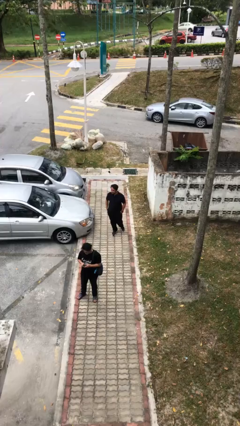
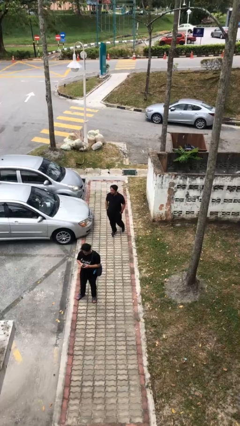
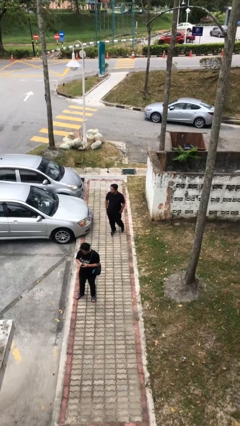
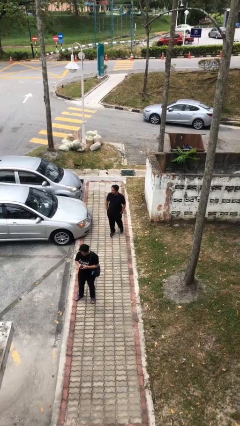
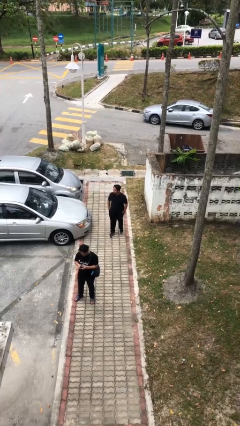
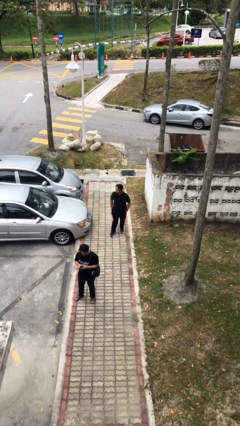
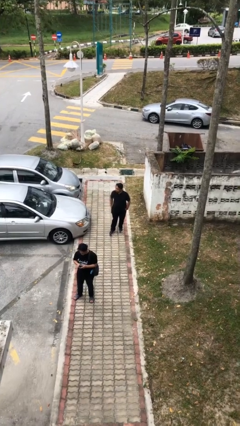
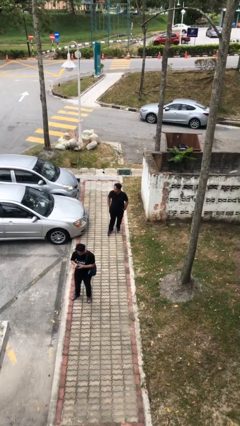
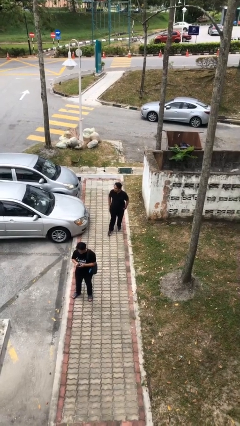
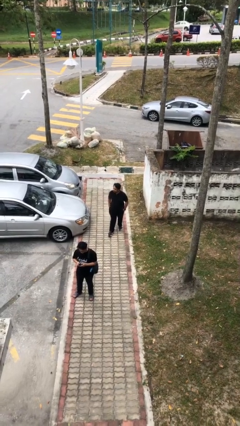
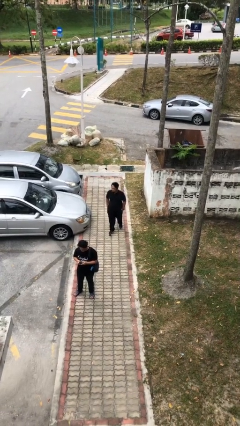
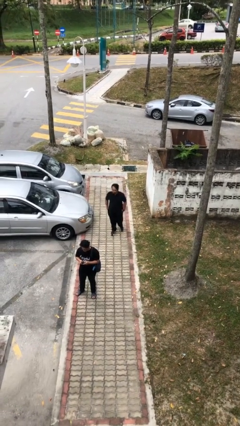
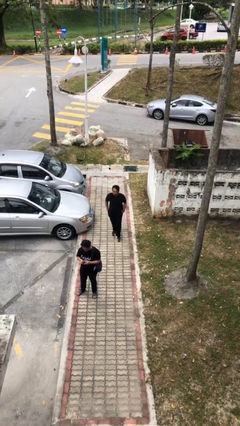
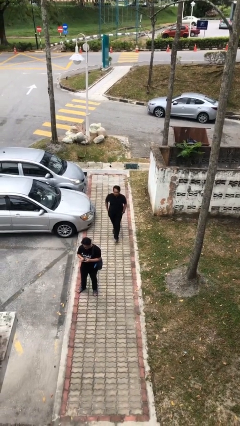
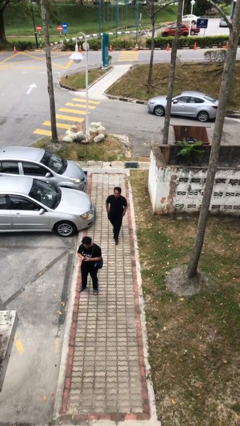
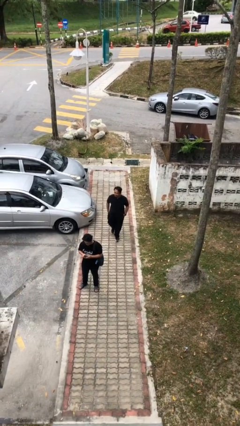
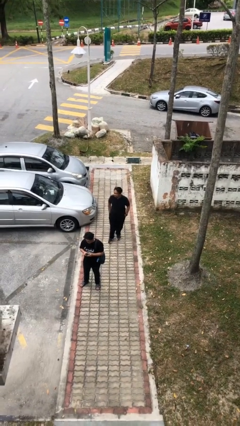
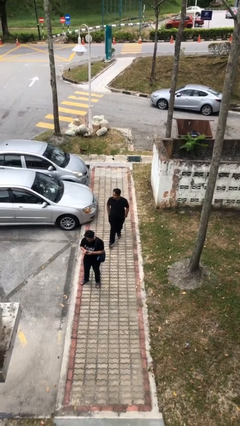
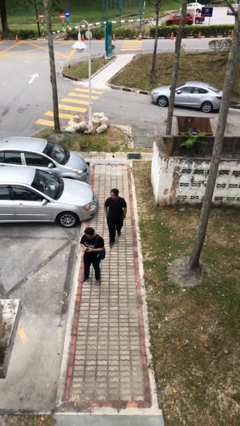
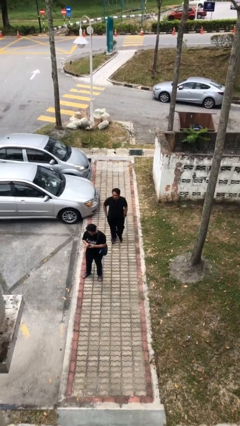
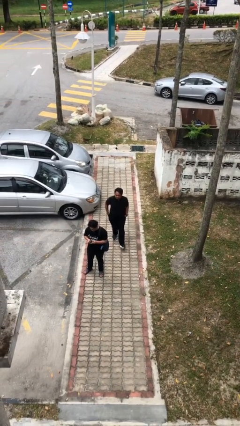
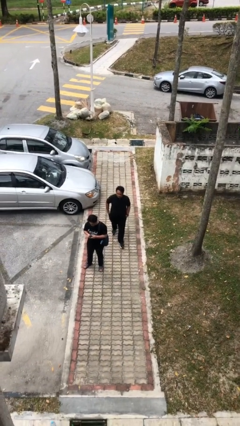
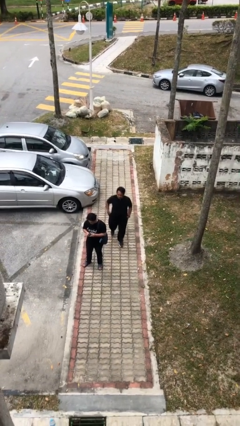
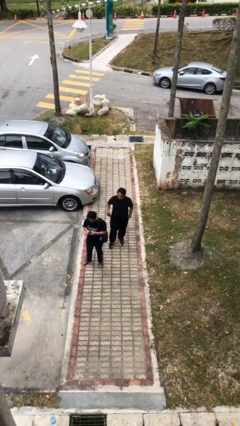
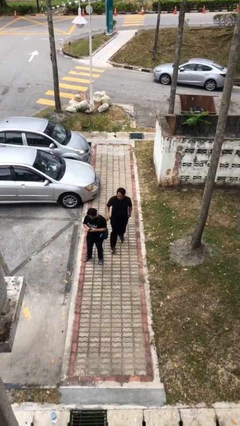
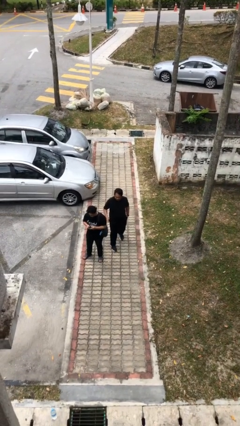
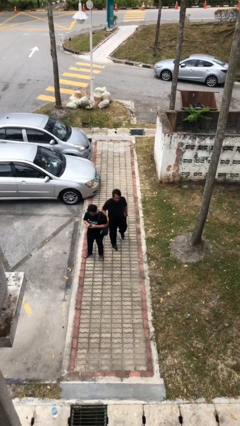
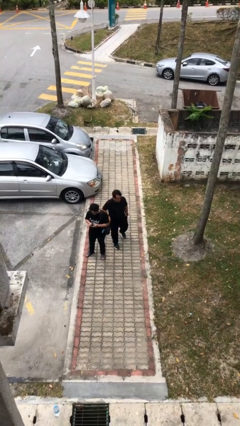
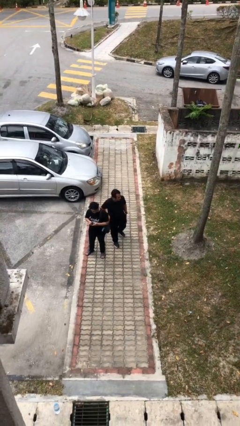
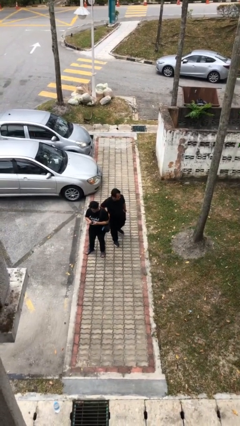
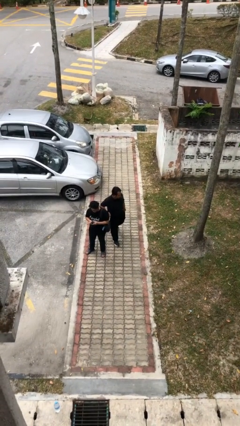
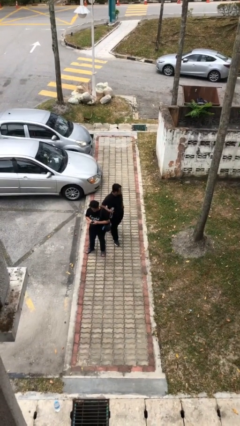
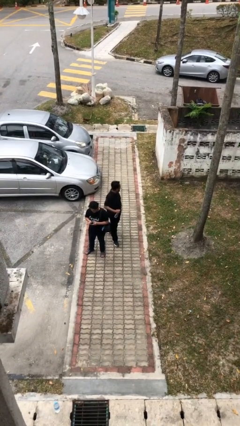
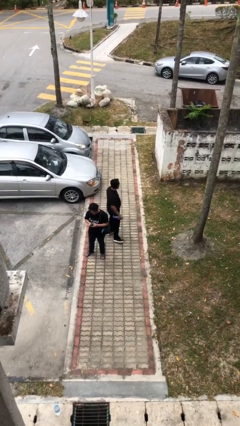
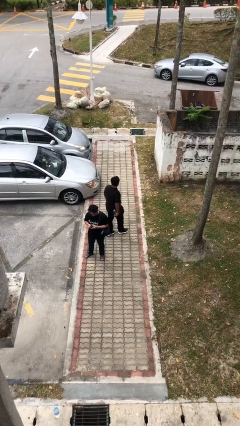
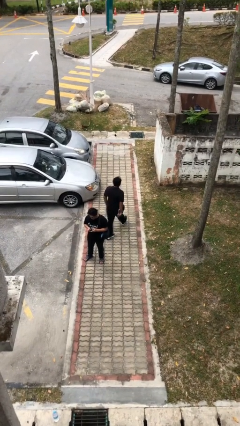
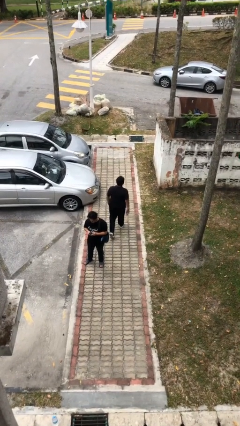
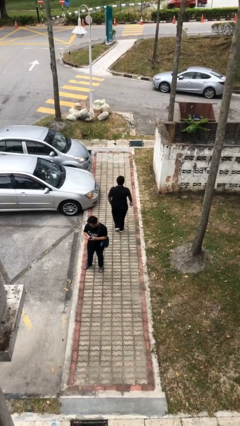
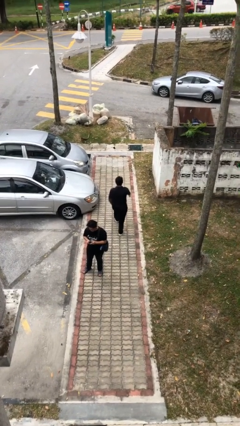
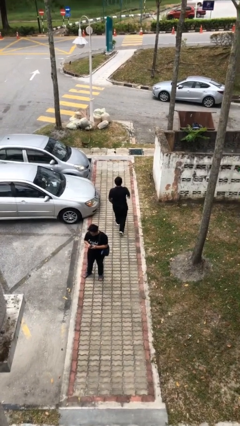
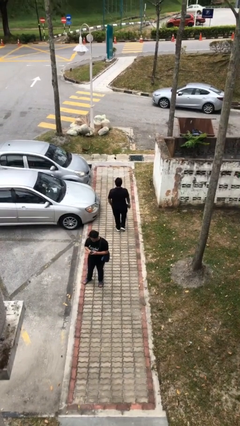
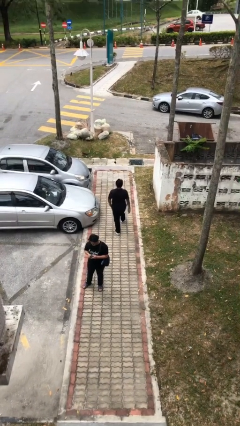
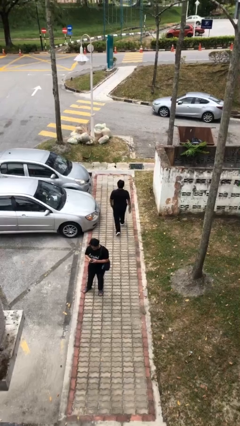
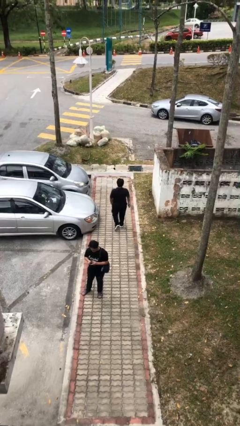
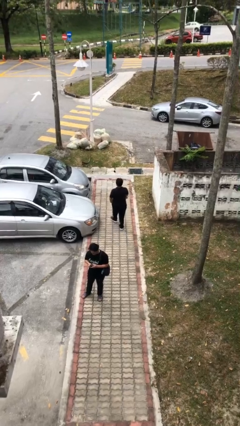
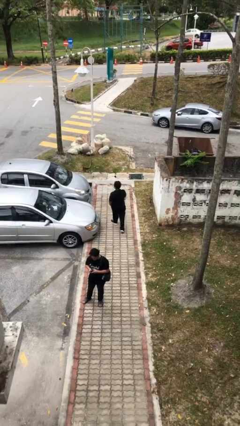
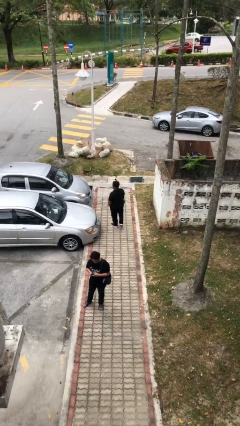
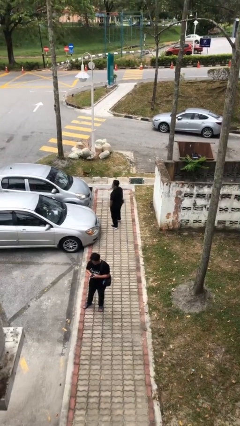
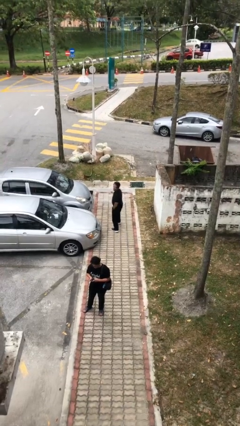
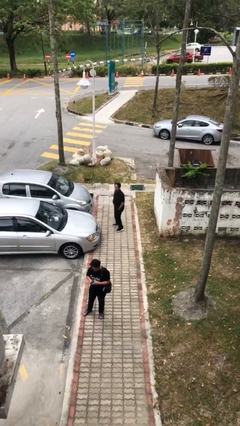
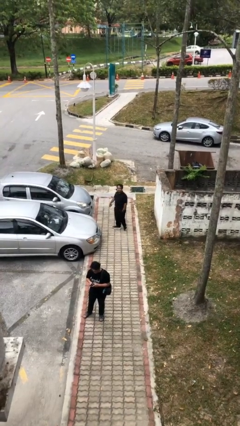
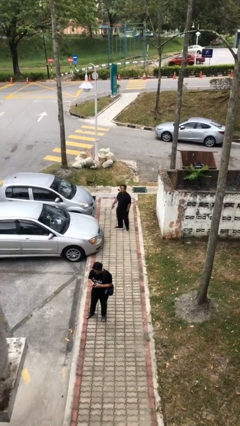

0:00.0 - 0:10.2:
person steals object from person

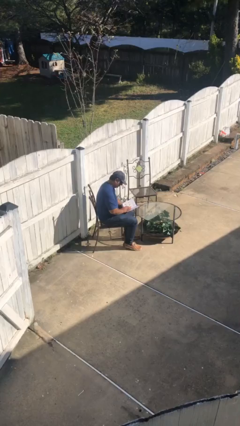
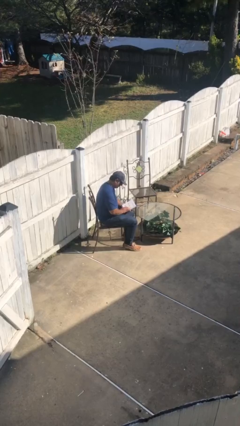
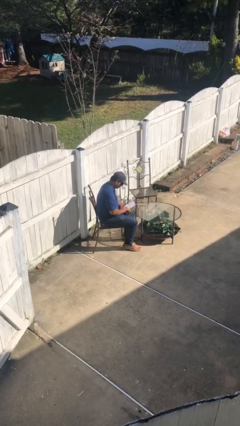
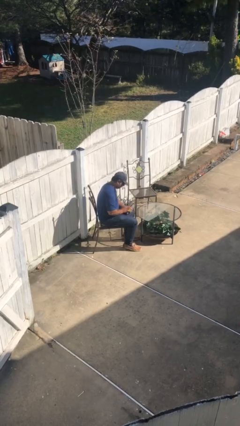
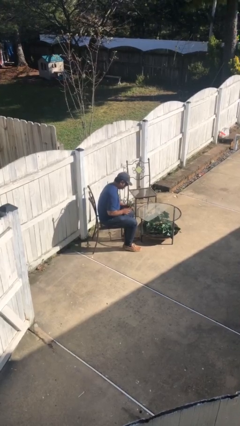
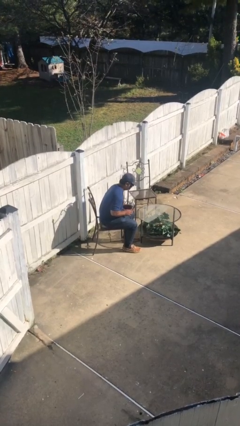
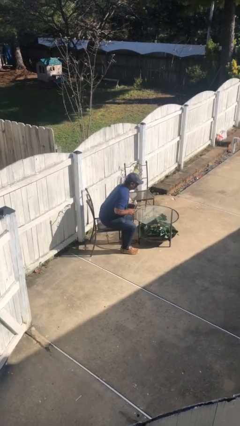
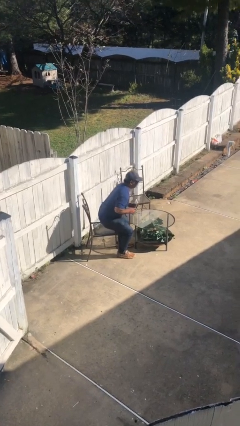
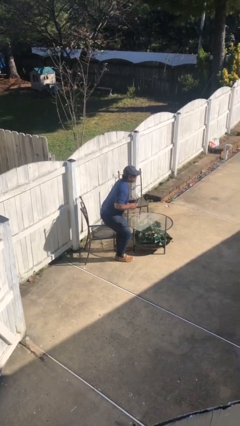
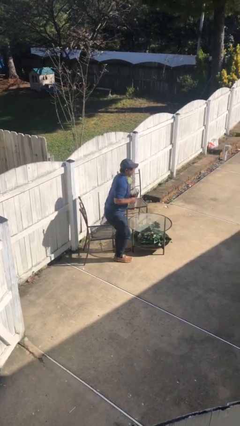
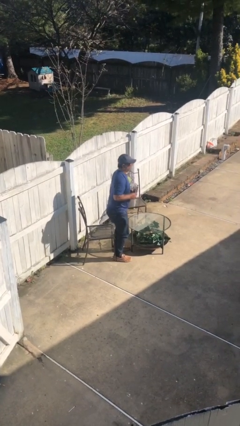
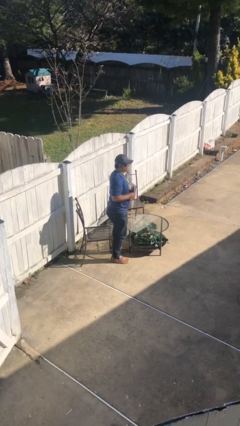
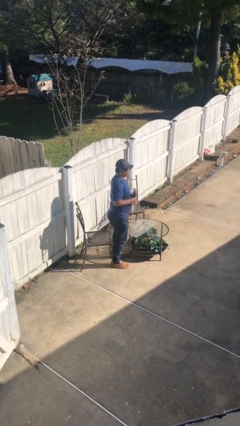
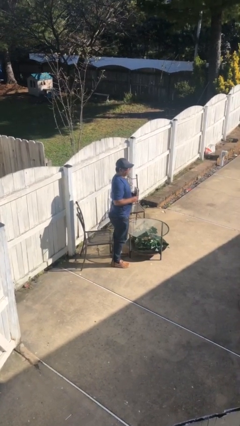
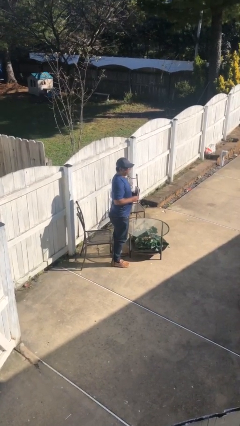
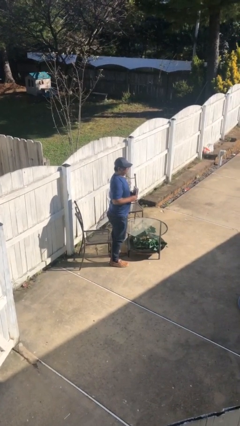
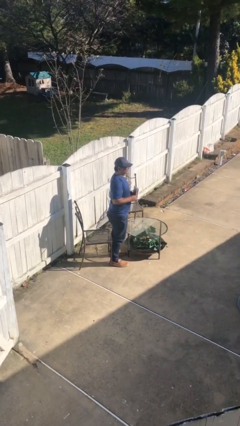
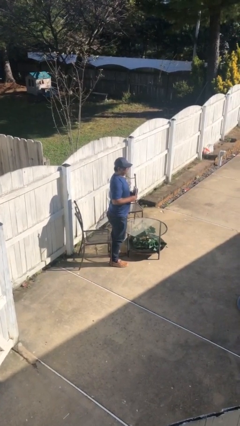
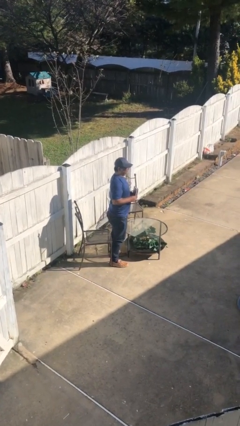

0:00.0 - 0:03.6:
person stands up

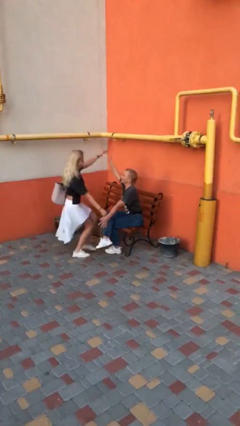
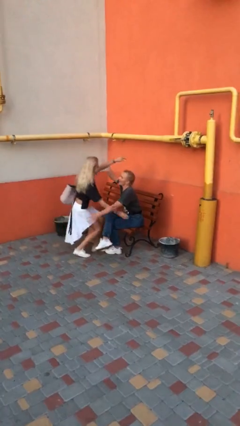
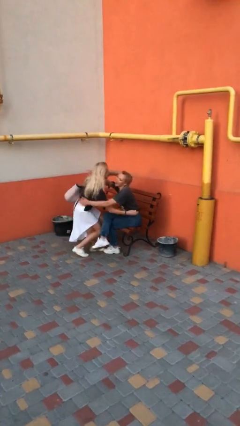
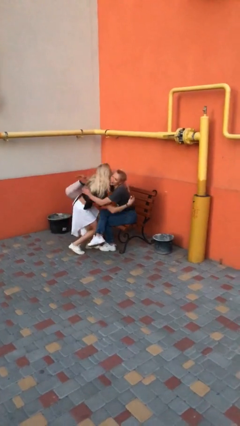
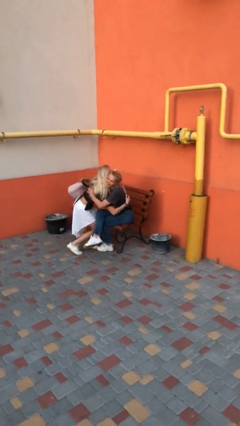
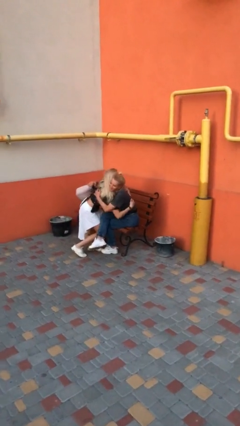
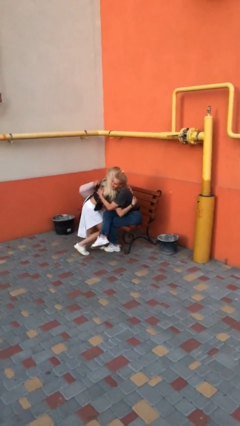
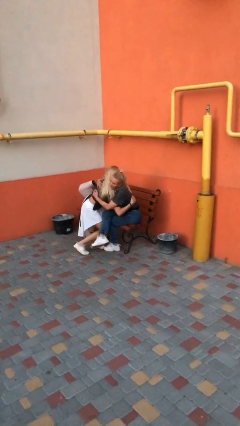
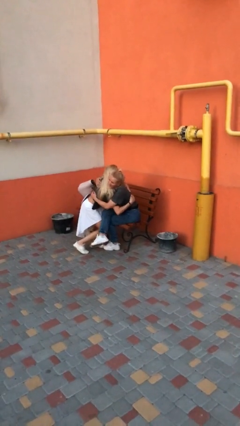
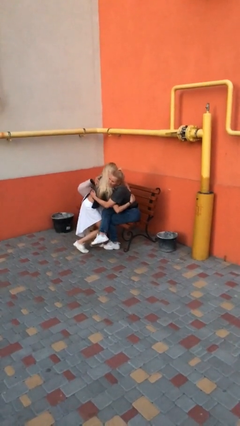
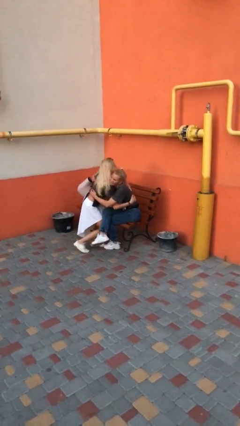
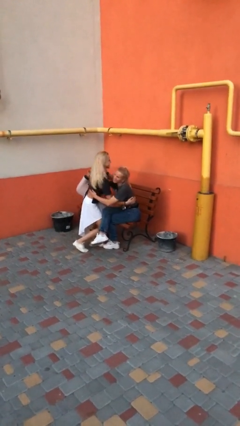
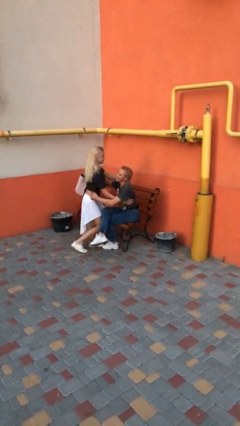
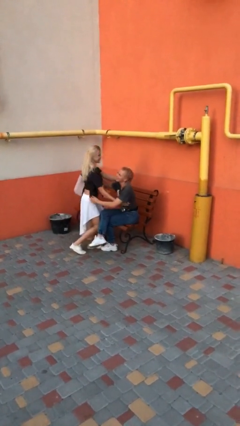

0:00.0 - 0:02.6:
person embraces person

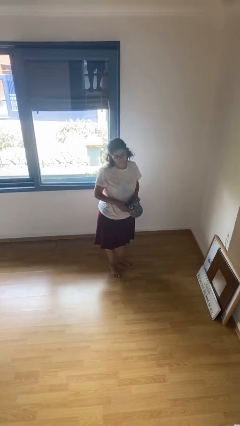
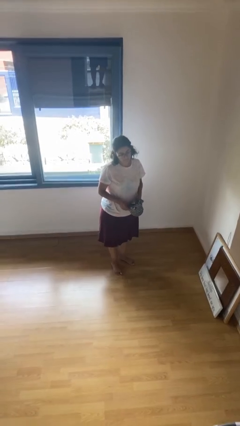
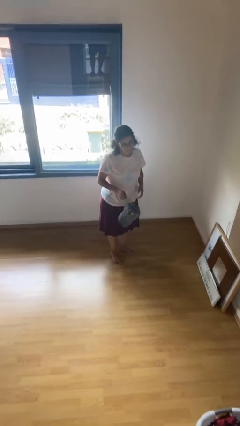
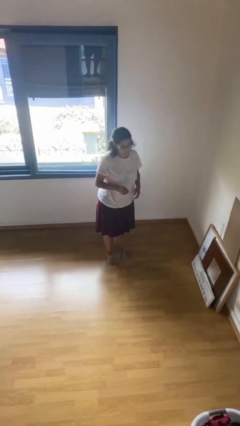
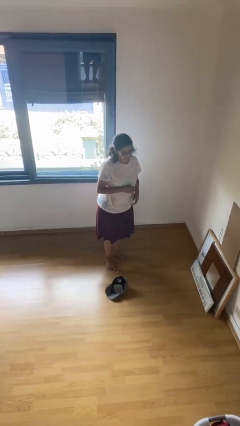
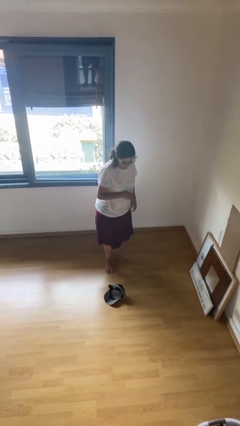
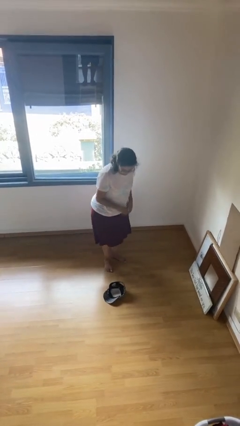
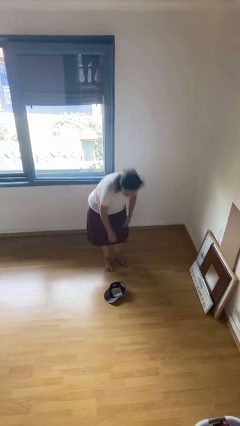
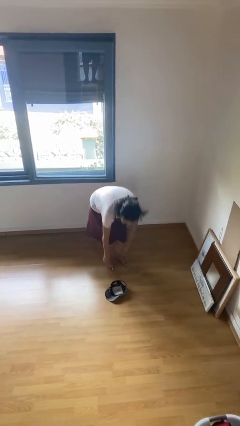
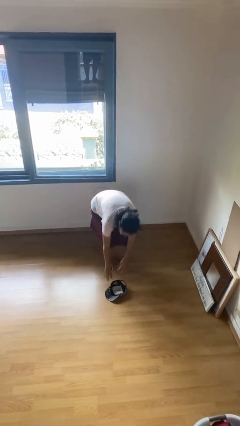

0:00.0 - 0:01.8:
person drops object
